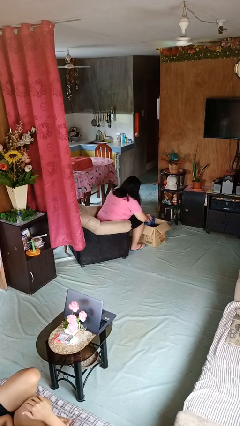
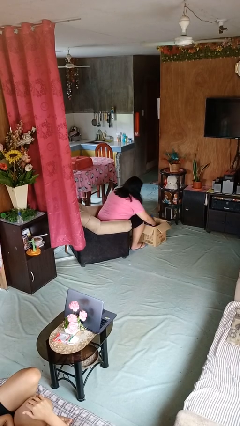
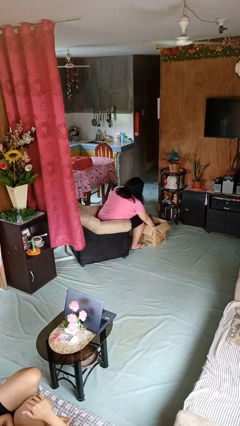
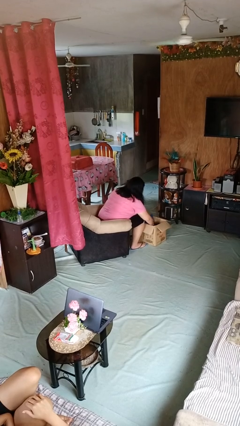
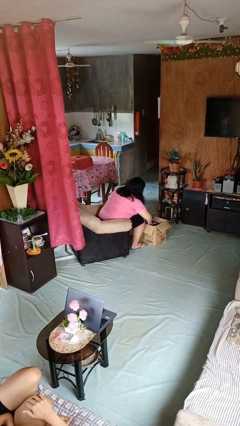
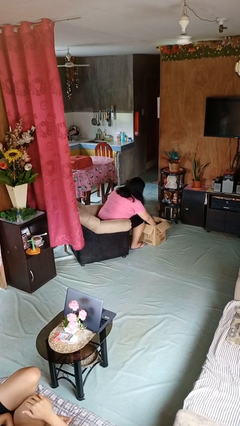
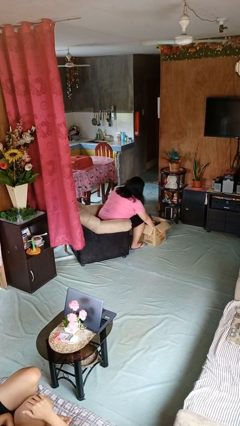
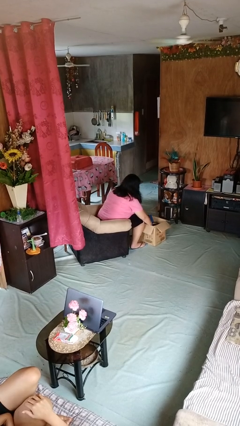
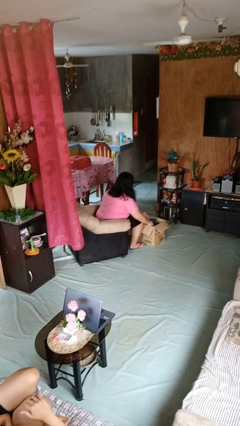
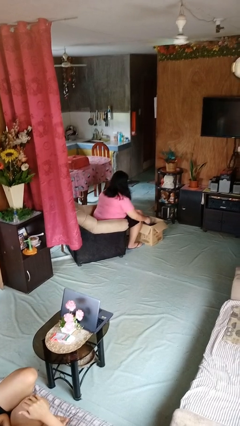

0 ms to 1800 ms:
person searches in box

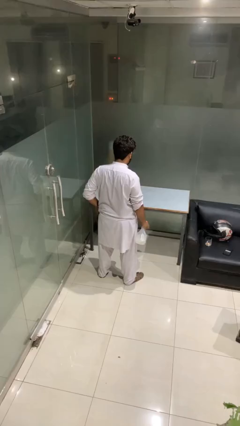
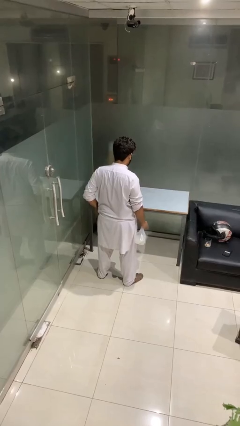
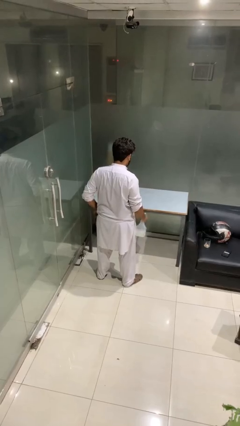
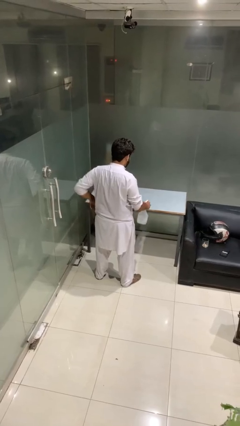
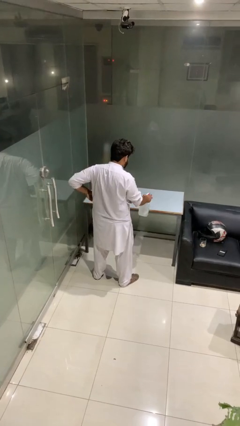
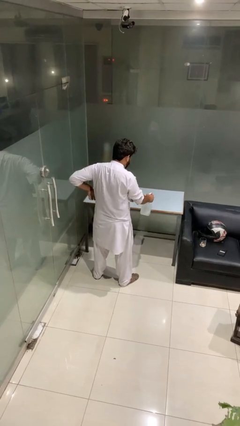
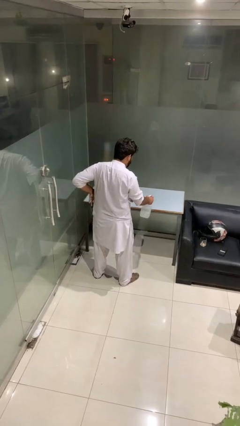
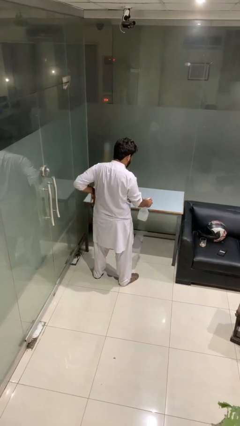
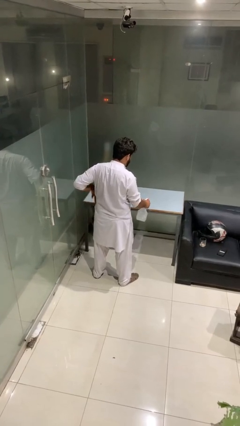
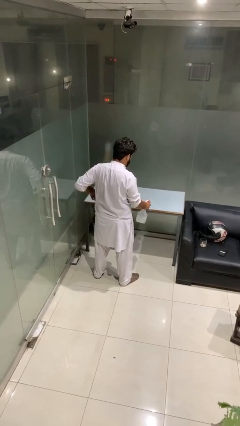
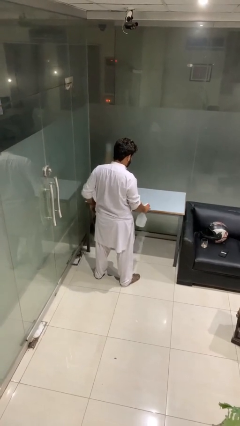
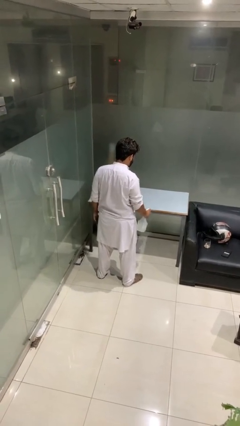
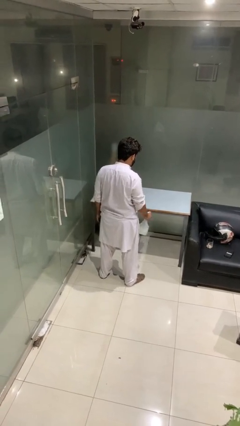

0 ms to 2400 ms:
person sprays from bottle

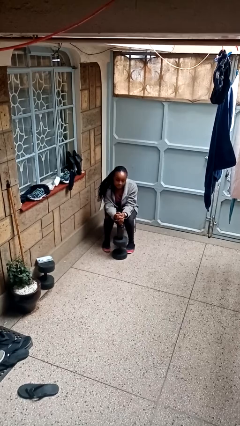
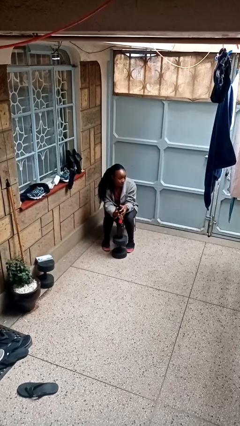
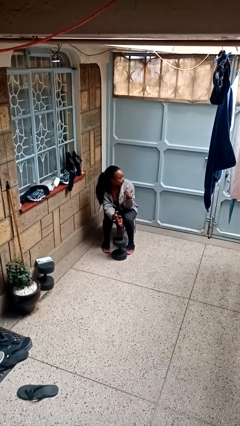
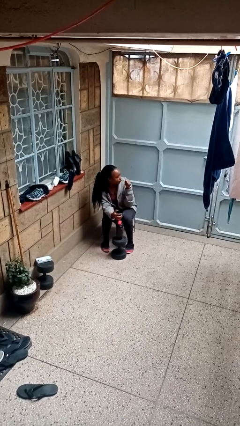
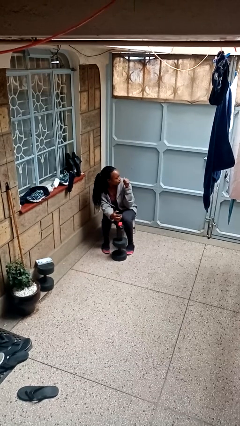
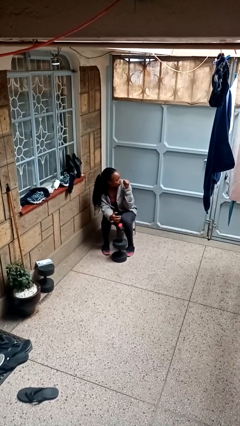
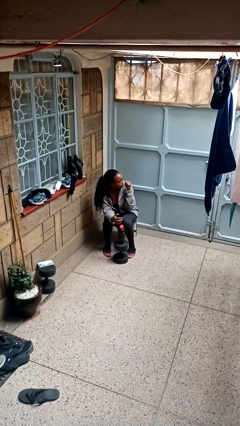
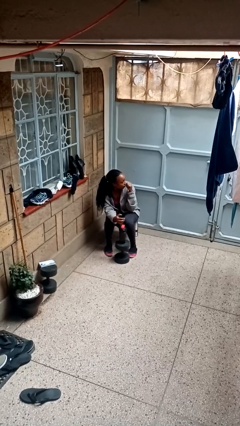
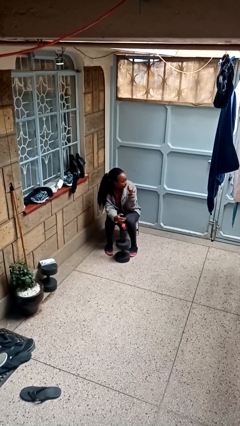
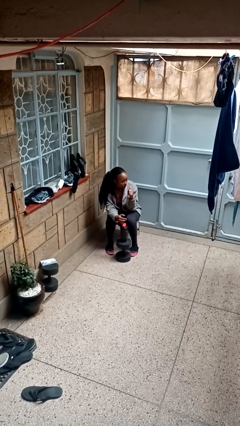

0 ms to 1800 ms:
person gestures behind me

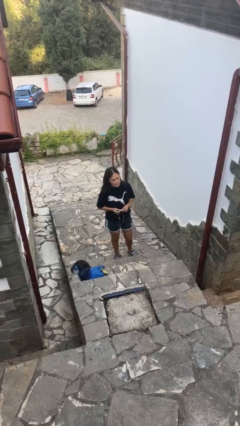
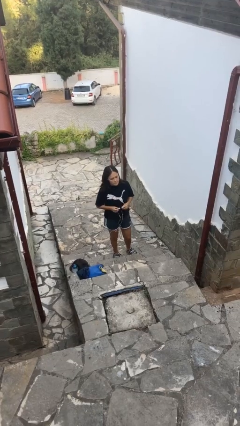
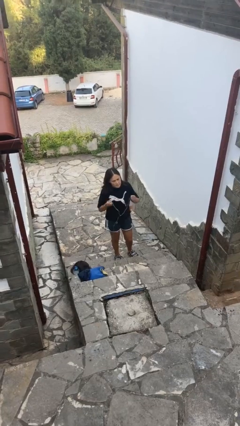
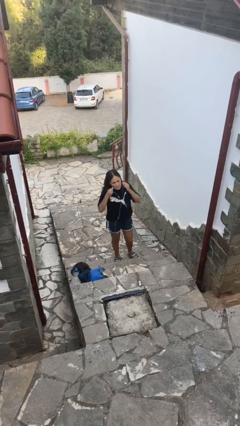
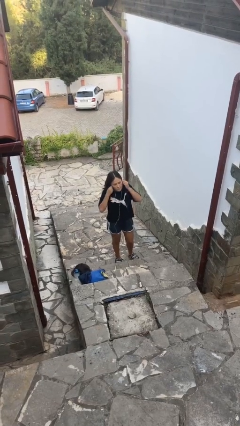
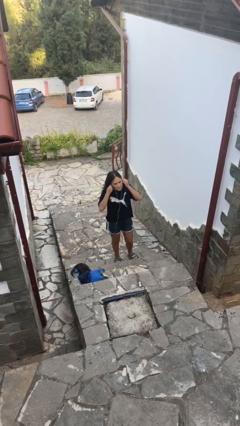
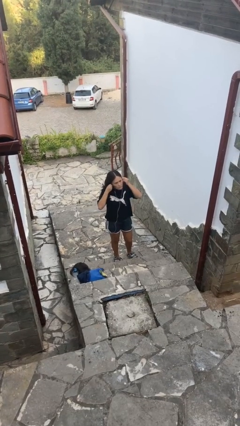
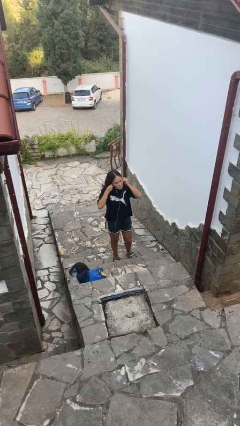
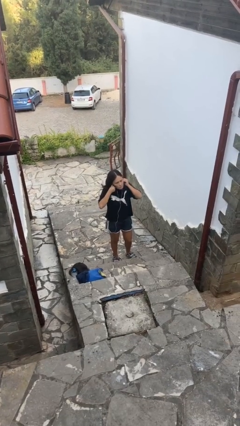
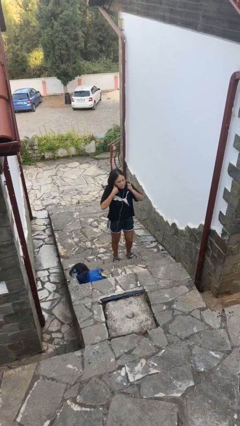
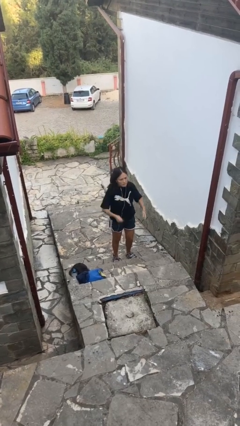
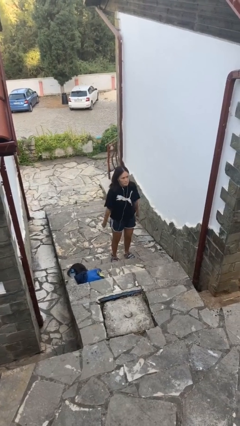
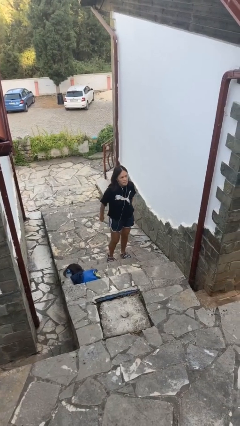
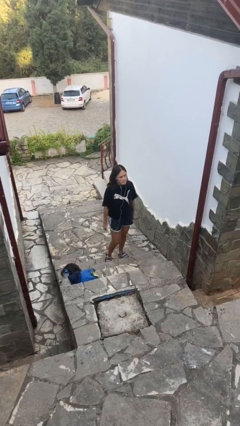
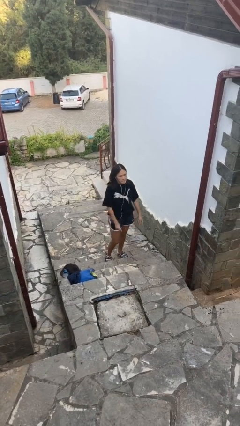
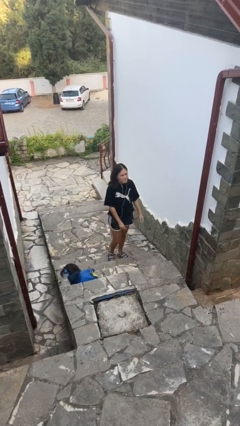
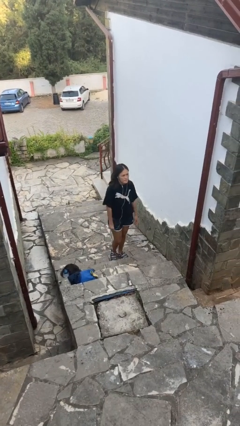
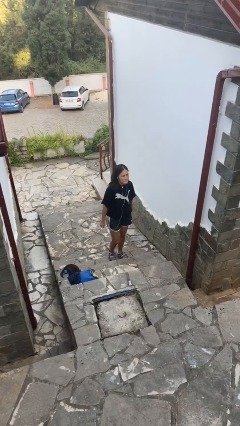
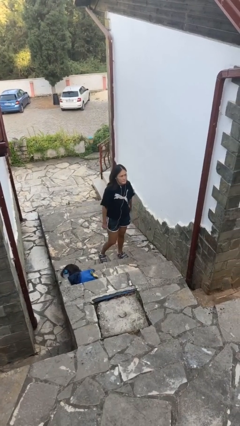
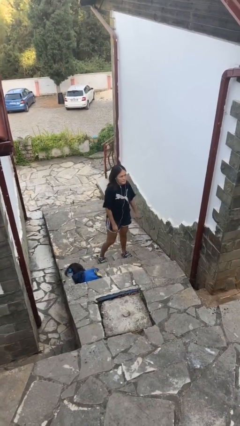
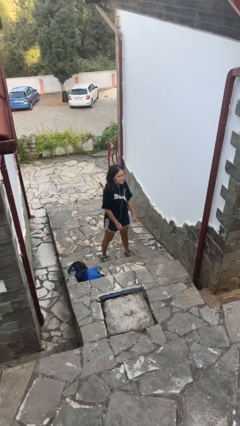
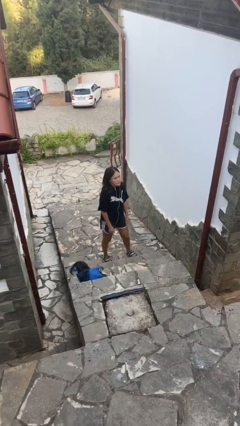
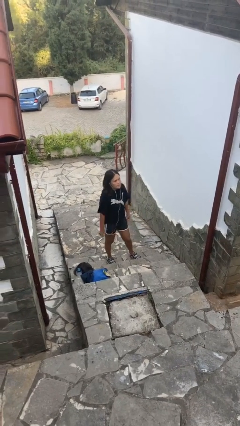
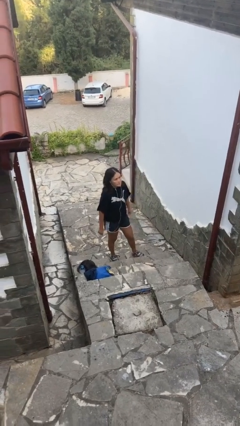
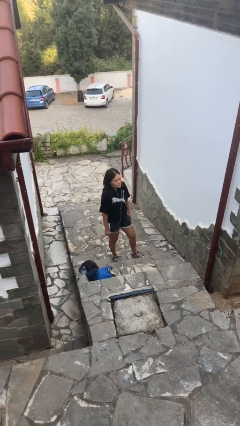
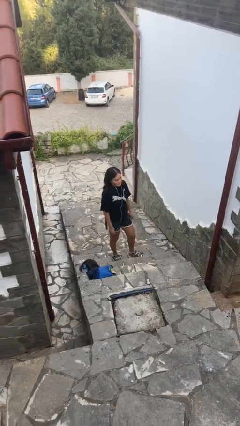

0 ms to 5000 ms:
person puts on headphones

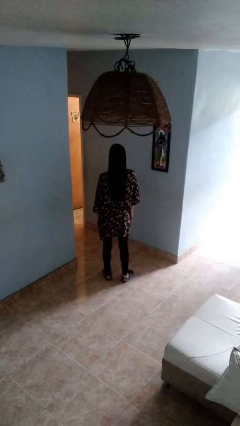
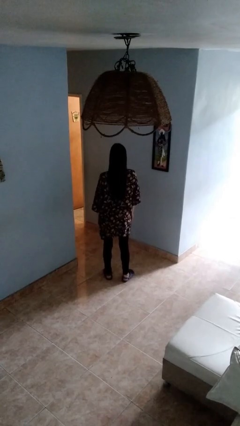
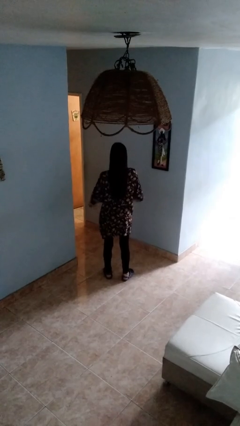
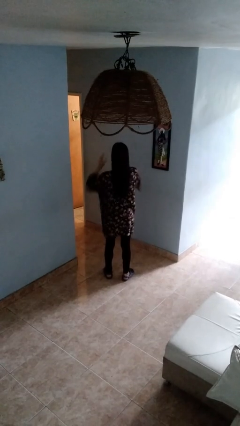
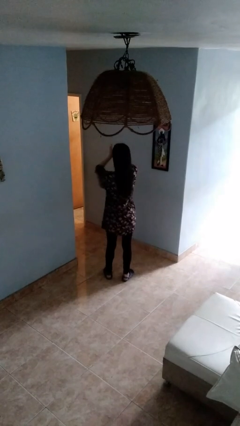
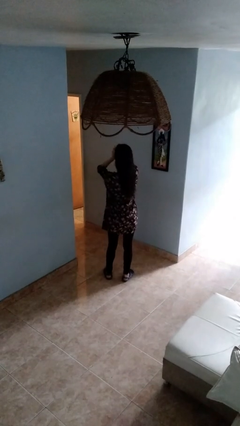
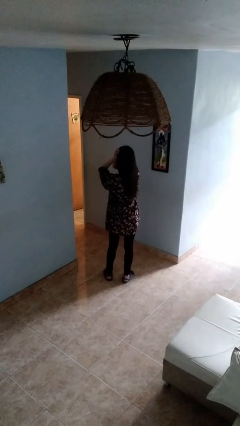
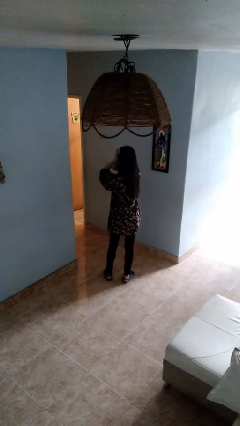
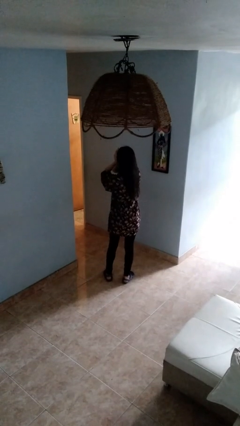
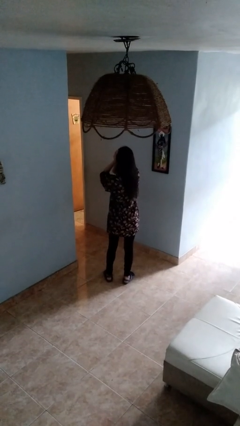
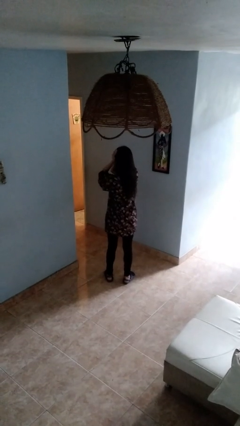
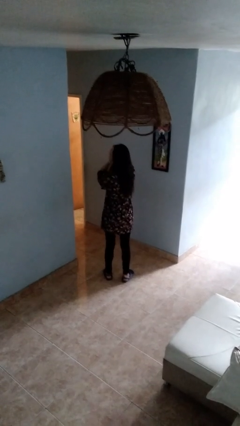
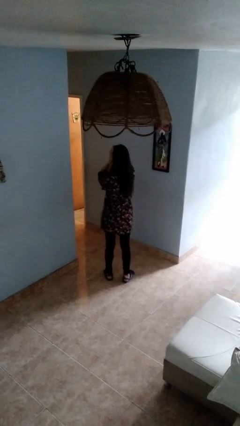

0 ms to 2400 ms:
person rubs eyes

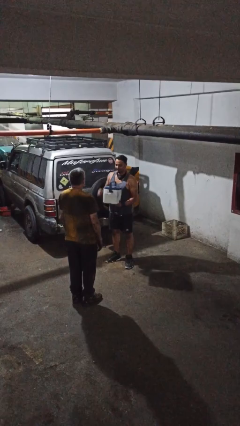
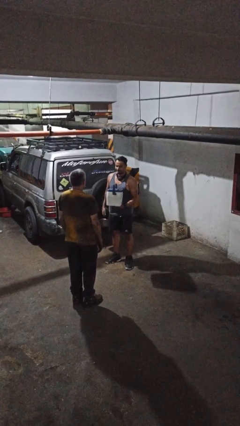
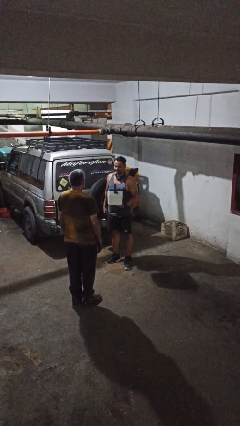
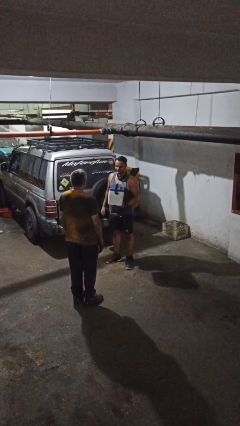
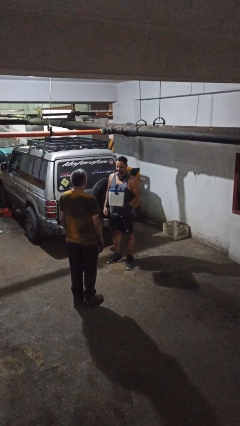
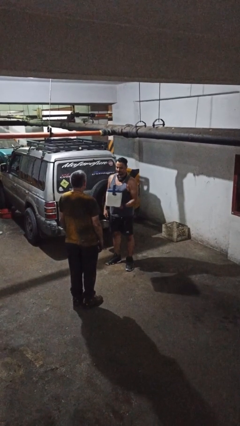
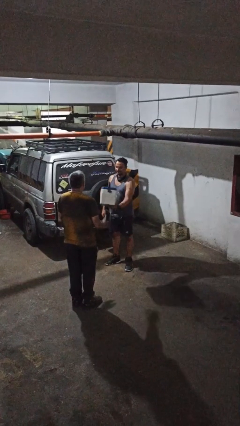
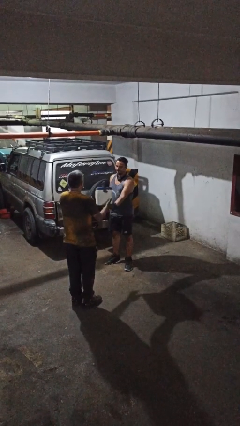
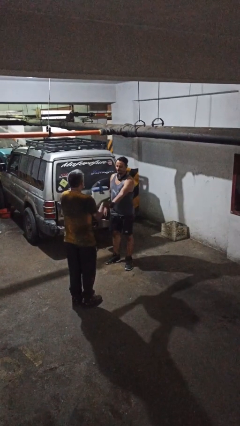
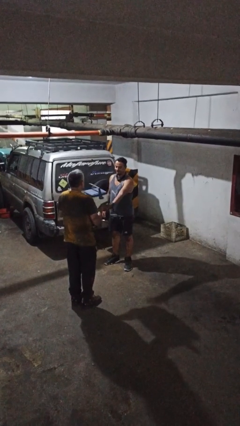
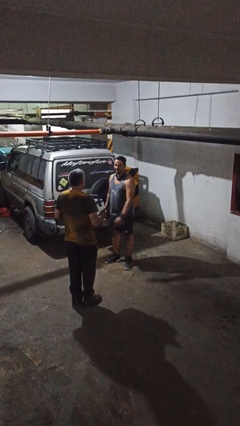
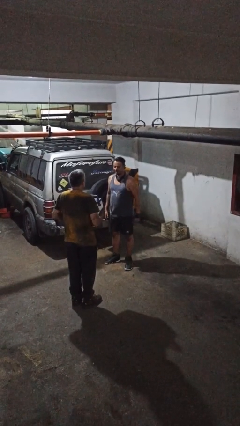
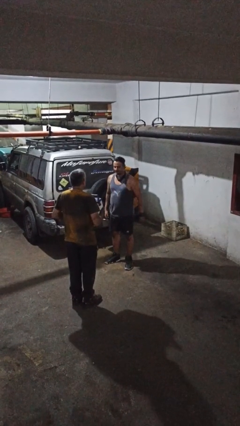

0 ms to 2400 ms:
person transfers object to person

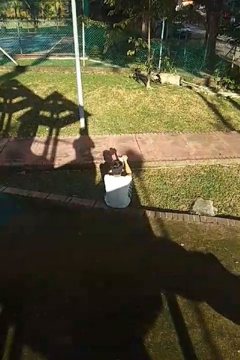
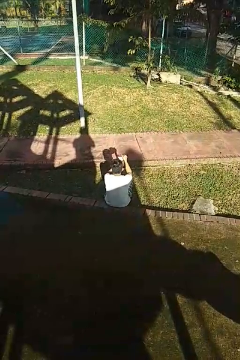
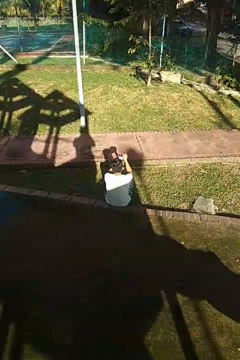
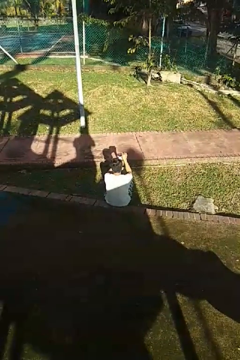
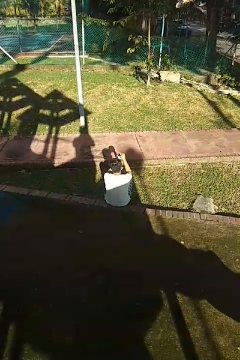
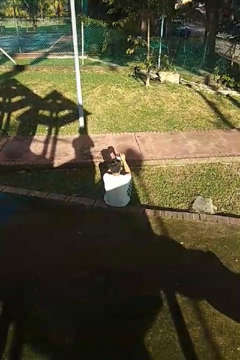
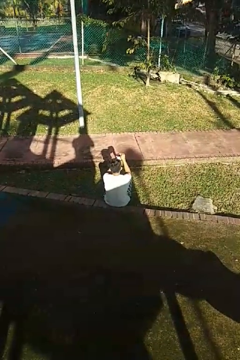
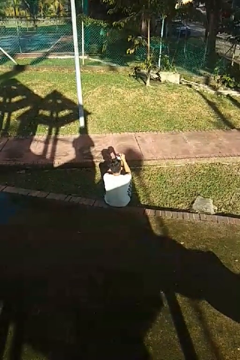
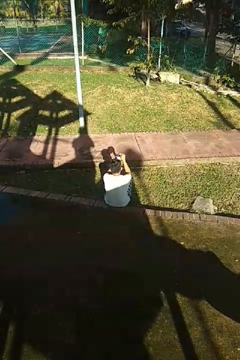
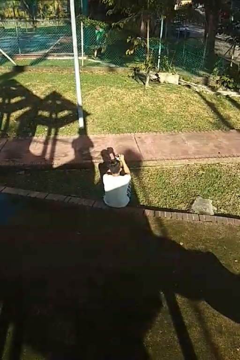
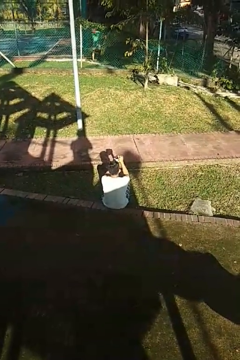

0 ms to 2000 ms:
person stirs mug
